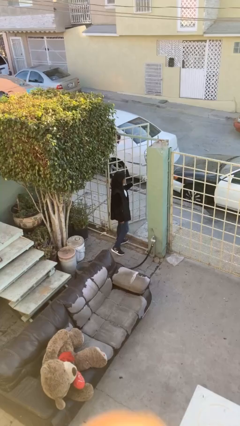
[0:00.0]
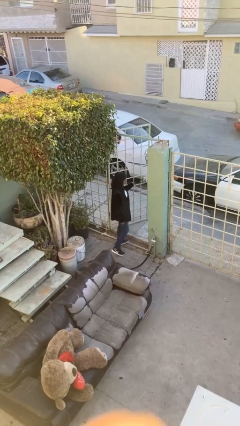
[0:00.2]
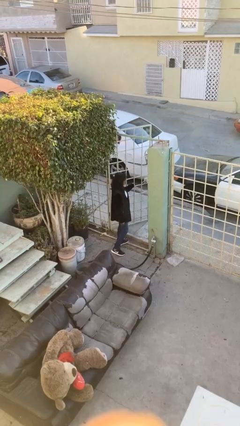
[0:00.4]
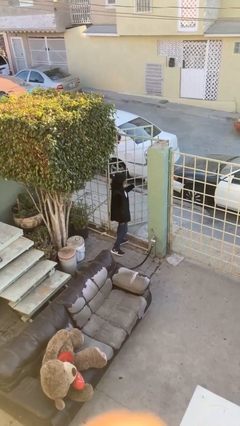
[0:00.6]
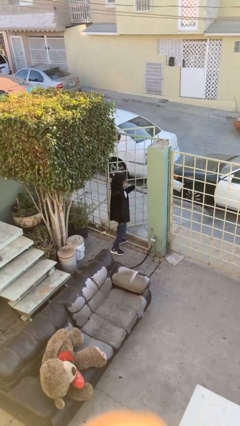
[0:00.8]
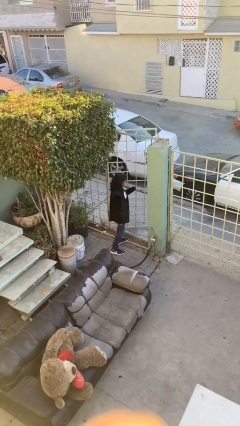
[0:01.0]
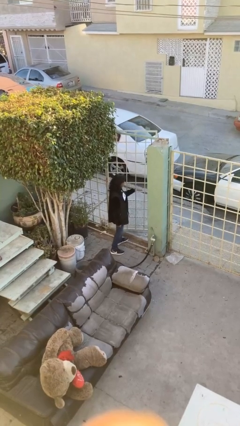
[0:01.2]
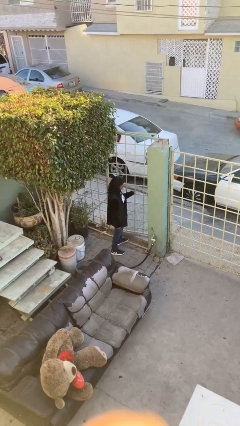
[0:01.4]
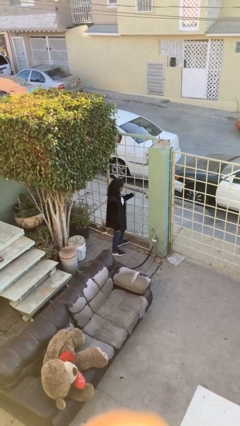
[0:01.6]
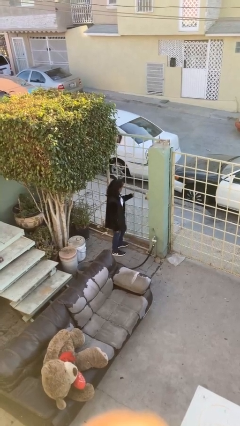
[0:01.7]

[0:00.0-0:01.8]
person closes facility door

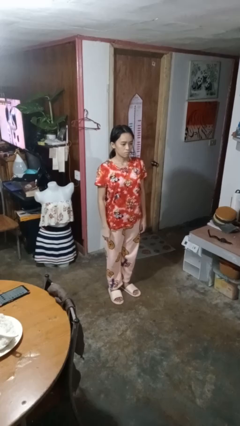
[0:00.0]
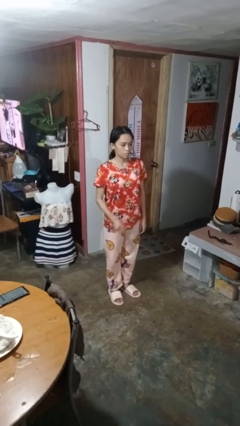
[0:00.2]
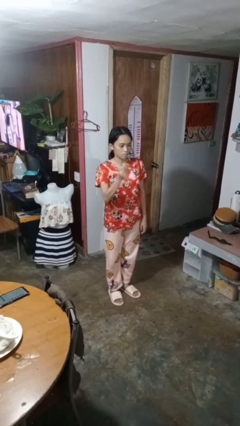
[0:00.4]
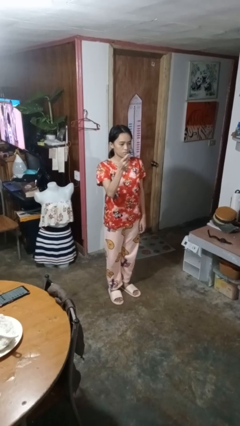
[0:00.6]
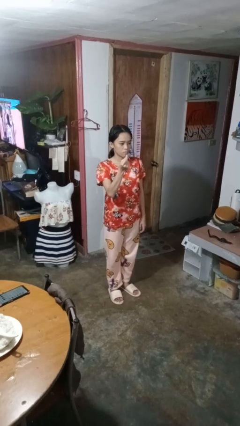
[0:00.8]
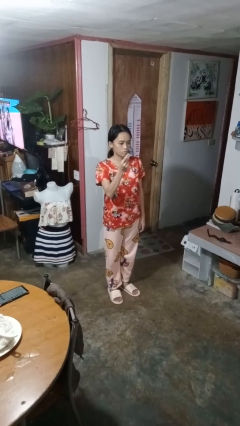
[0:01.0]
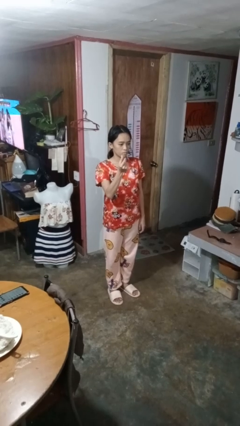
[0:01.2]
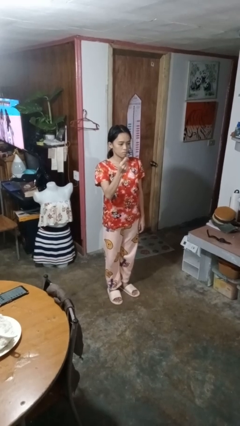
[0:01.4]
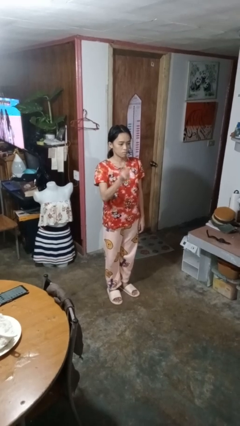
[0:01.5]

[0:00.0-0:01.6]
person snaps fingers

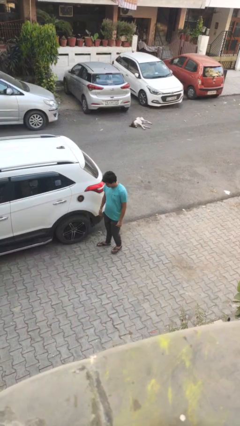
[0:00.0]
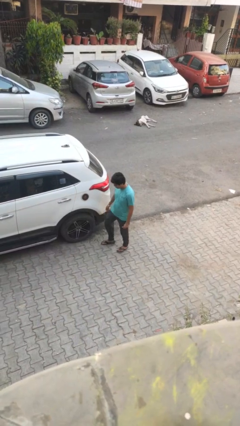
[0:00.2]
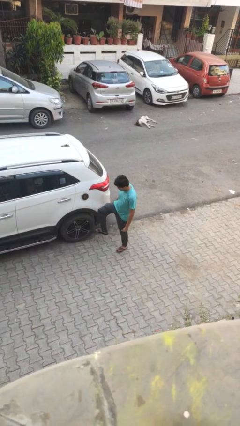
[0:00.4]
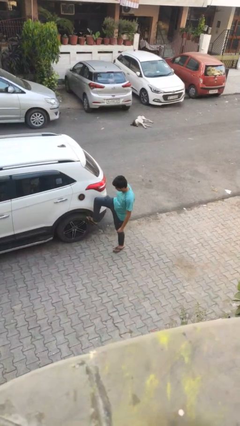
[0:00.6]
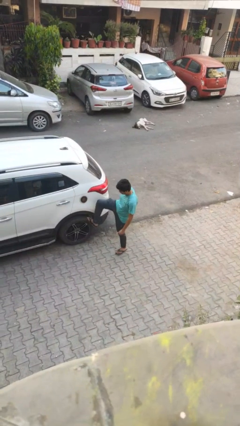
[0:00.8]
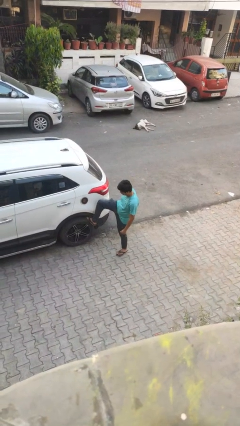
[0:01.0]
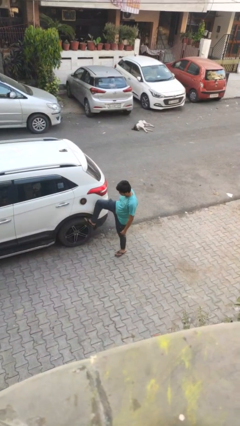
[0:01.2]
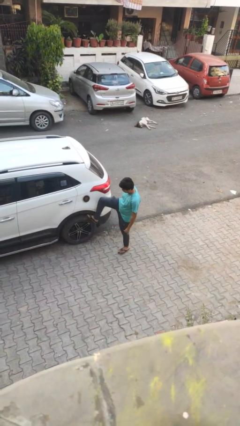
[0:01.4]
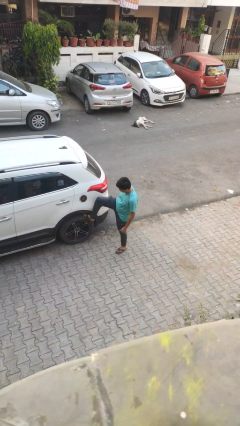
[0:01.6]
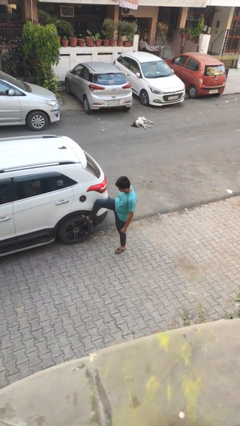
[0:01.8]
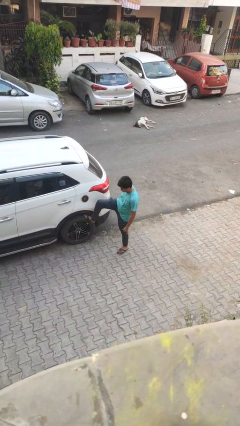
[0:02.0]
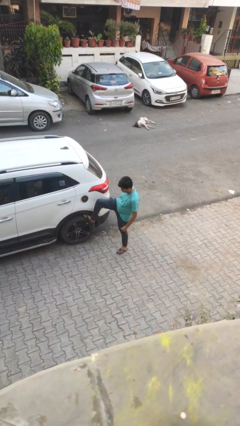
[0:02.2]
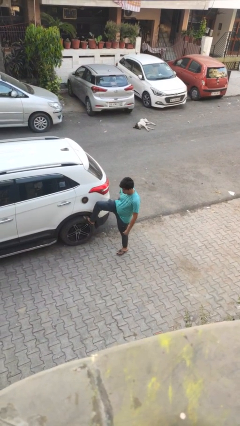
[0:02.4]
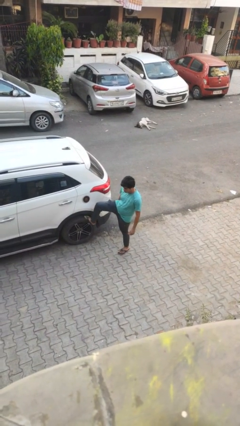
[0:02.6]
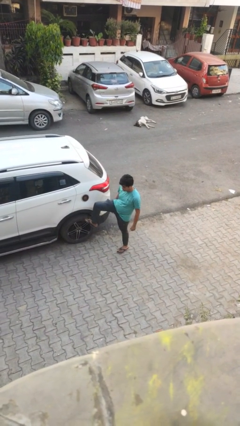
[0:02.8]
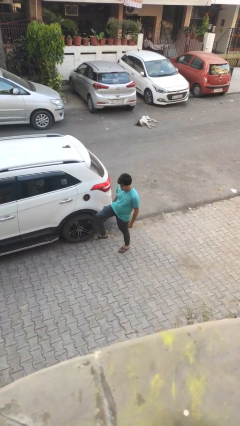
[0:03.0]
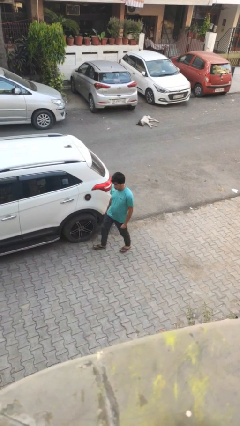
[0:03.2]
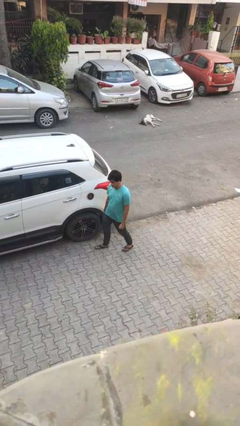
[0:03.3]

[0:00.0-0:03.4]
person kicks car tires

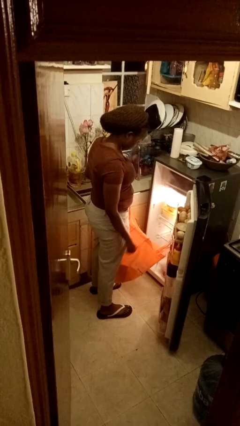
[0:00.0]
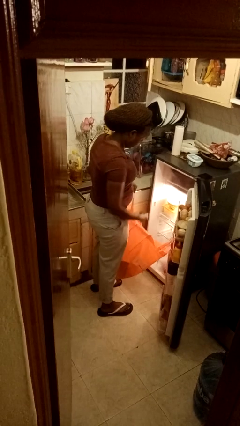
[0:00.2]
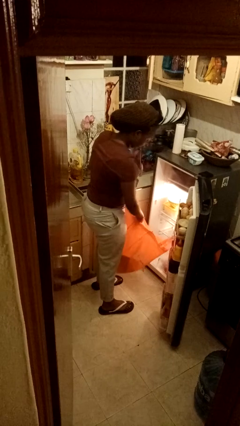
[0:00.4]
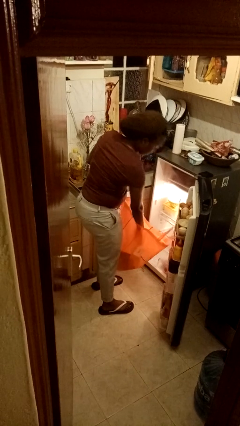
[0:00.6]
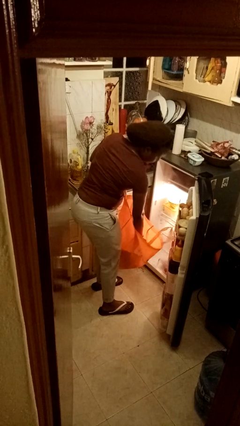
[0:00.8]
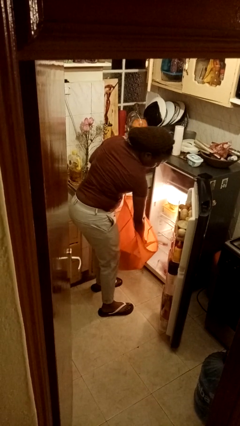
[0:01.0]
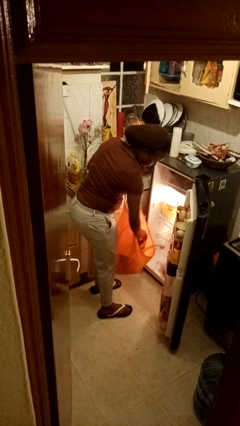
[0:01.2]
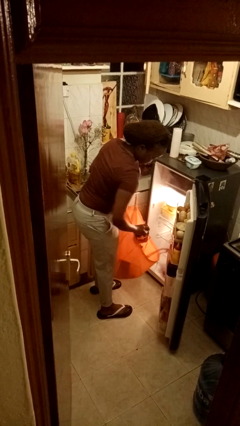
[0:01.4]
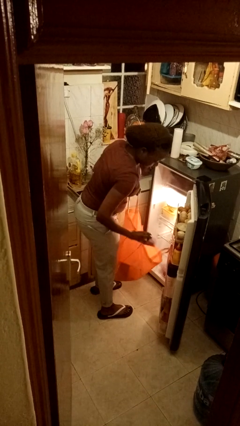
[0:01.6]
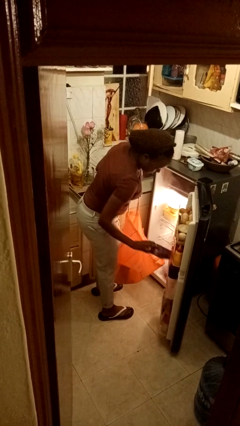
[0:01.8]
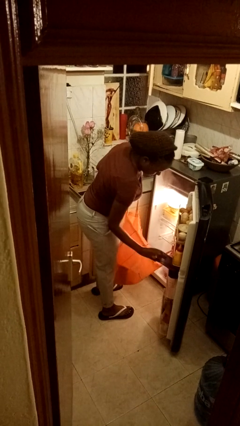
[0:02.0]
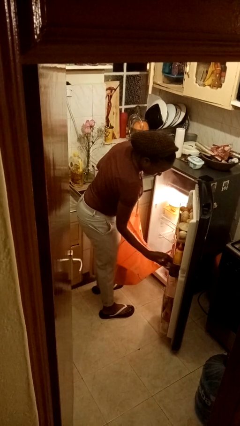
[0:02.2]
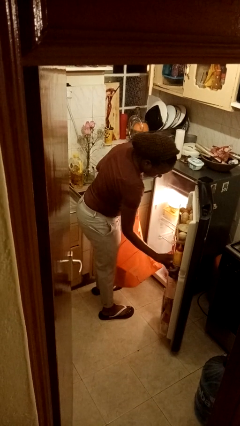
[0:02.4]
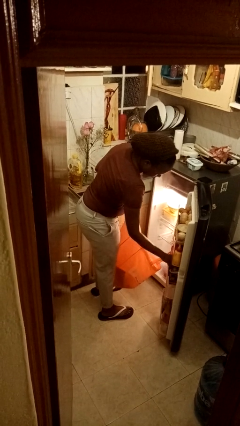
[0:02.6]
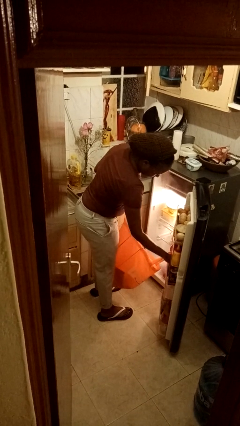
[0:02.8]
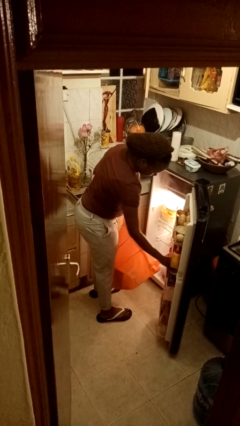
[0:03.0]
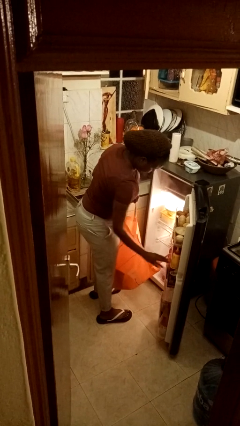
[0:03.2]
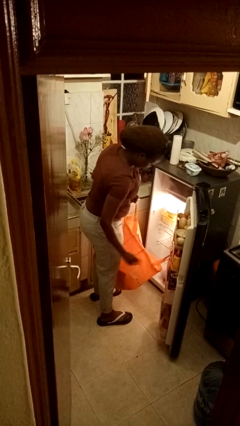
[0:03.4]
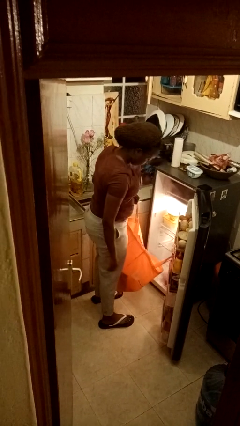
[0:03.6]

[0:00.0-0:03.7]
person loads groceries into refrigerator

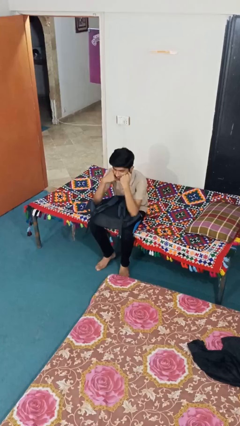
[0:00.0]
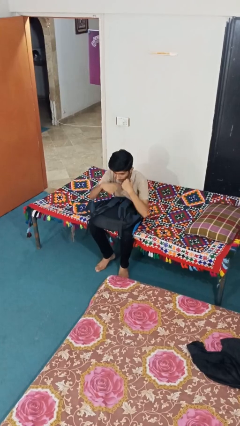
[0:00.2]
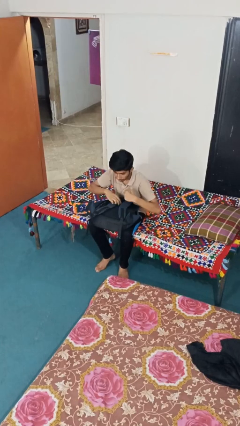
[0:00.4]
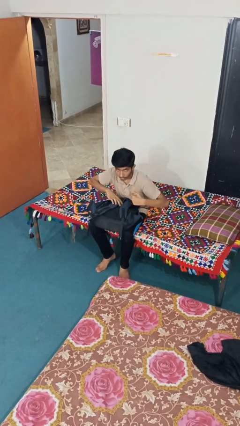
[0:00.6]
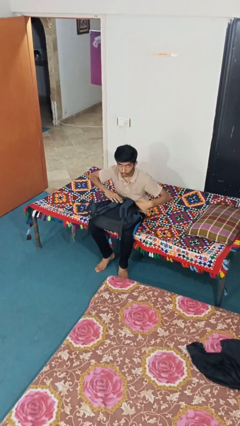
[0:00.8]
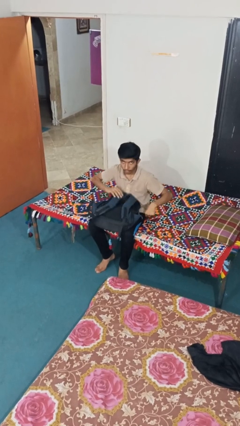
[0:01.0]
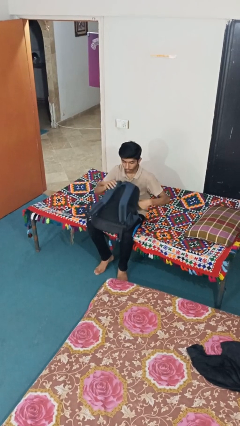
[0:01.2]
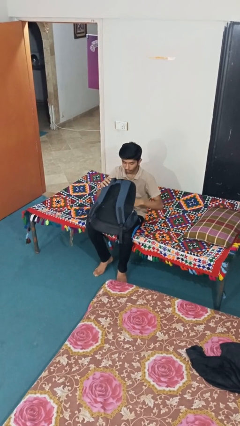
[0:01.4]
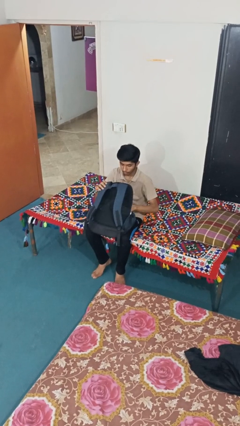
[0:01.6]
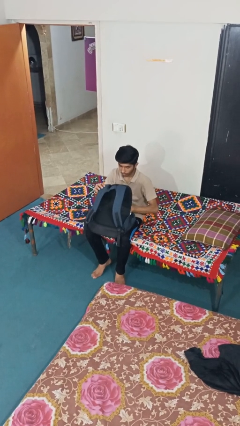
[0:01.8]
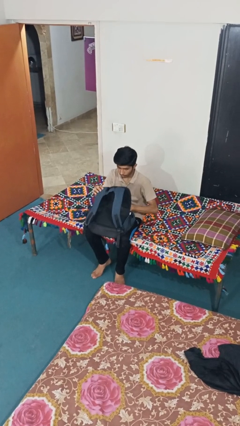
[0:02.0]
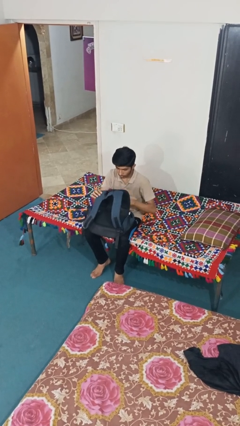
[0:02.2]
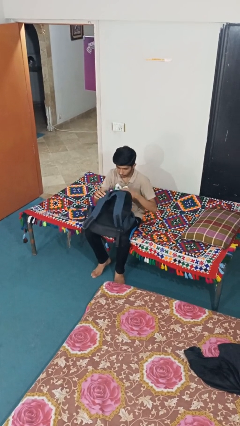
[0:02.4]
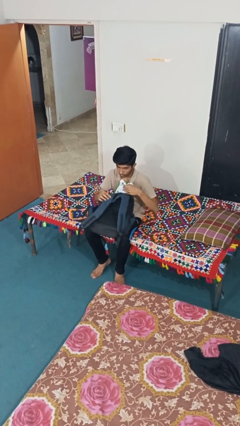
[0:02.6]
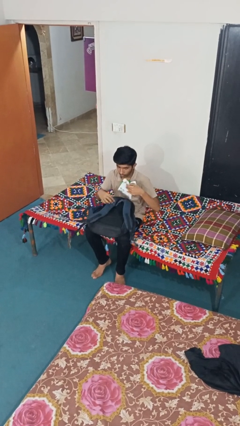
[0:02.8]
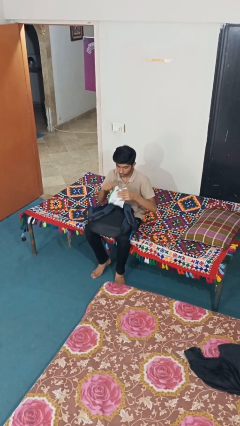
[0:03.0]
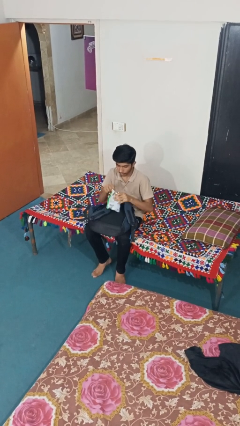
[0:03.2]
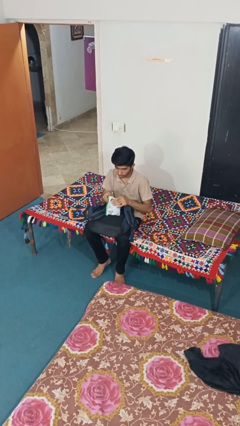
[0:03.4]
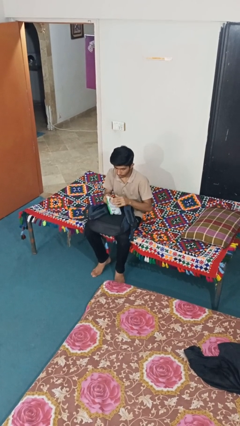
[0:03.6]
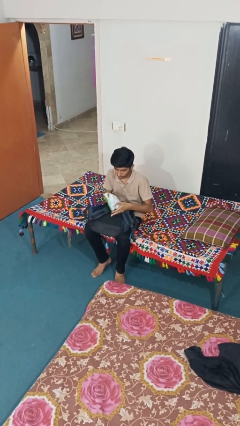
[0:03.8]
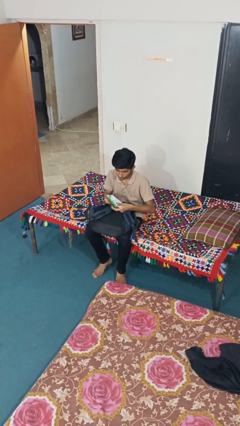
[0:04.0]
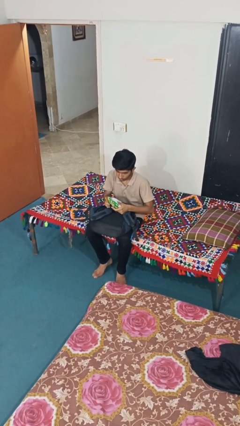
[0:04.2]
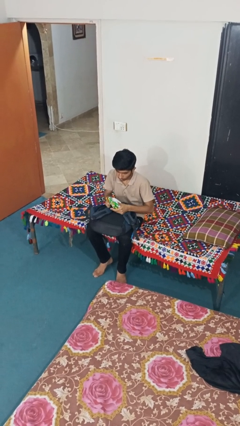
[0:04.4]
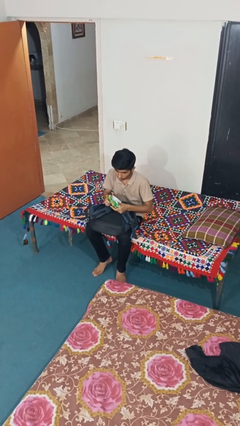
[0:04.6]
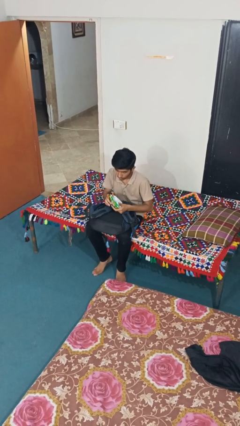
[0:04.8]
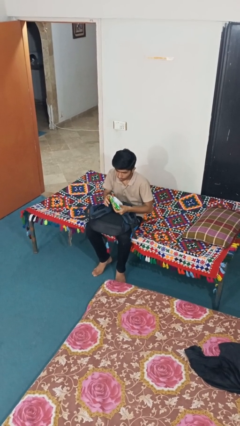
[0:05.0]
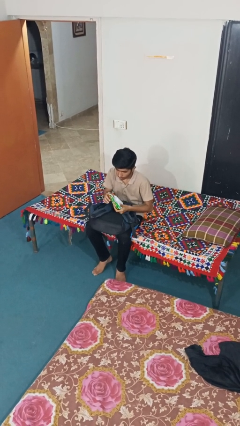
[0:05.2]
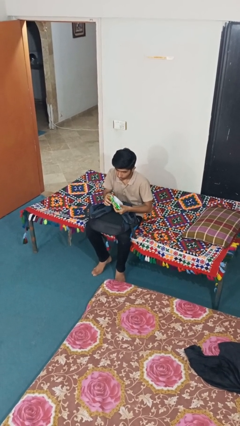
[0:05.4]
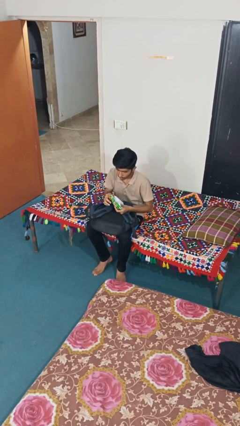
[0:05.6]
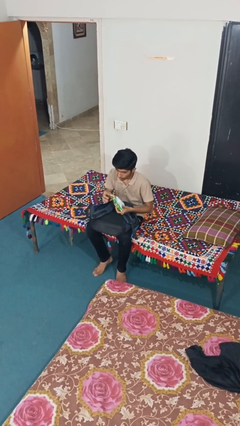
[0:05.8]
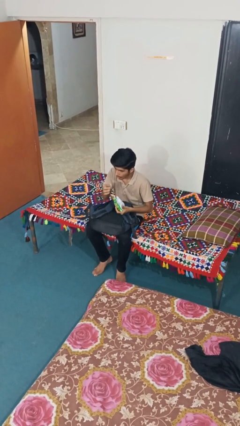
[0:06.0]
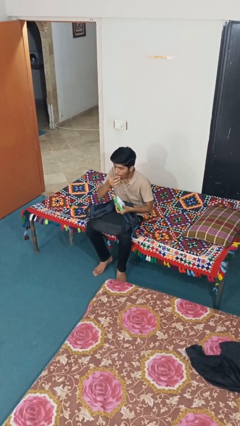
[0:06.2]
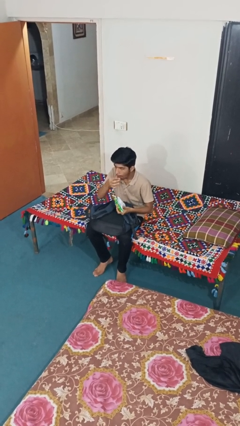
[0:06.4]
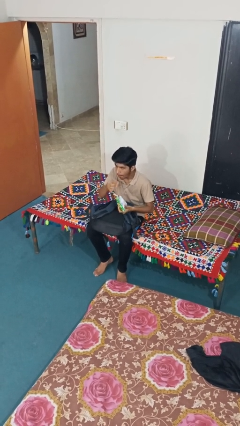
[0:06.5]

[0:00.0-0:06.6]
person eats snack from bag

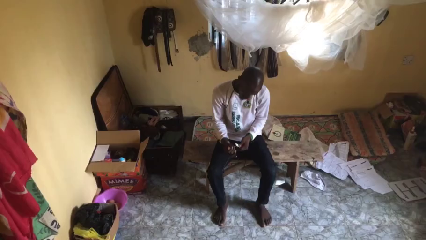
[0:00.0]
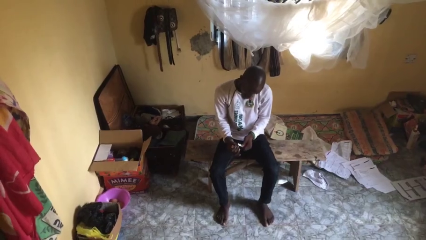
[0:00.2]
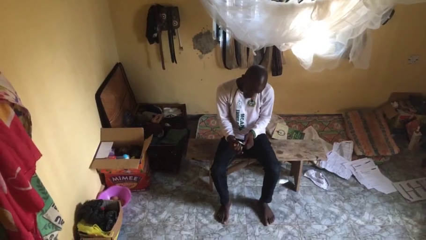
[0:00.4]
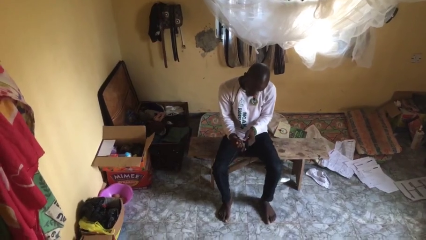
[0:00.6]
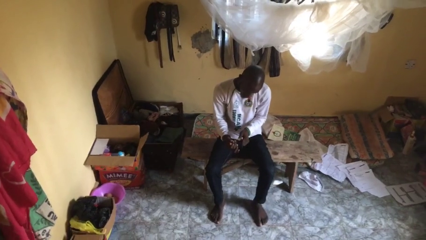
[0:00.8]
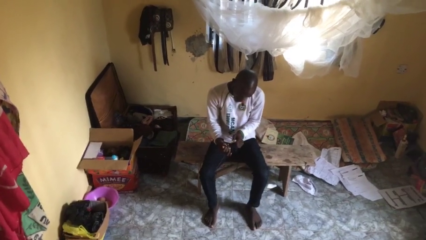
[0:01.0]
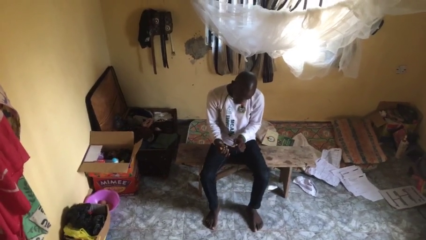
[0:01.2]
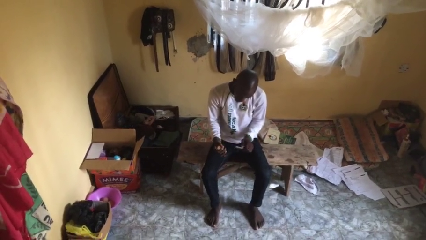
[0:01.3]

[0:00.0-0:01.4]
person files fingernails
